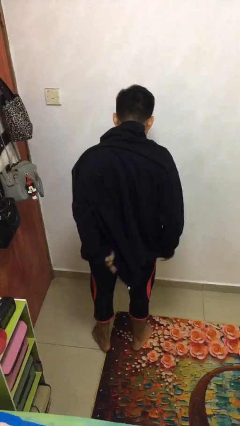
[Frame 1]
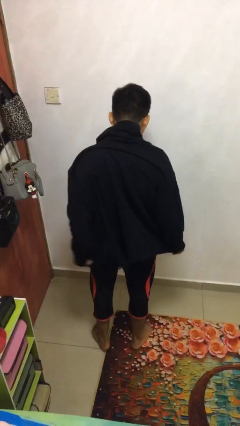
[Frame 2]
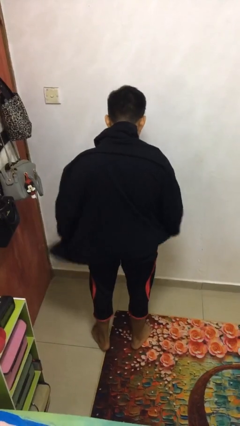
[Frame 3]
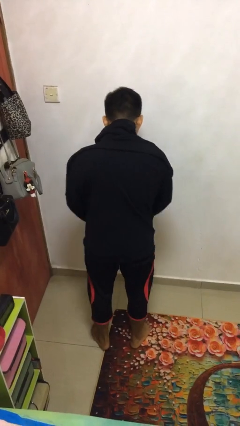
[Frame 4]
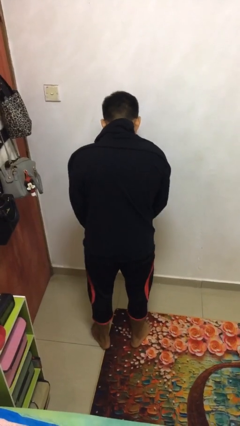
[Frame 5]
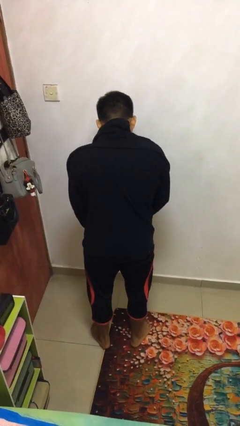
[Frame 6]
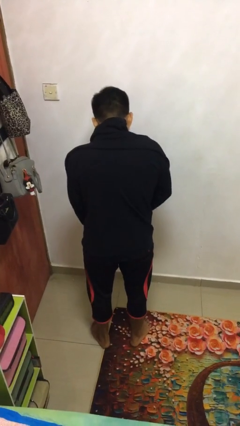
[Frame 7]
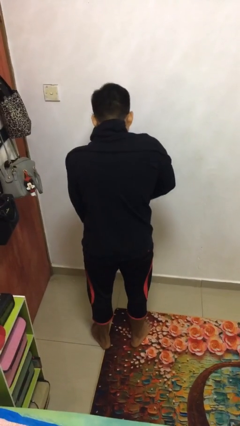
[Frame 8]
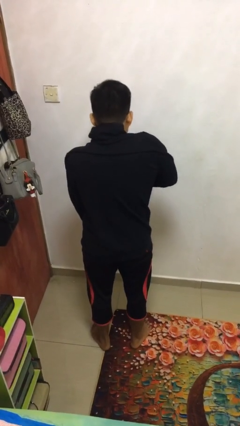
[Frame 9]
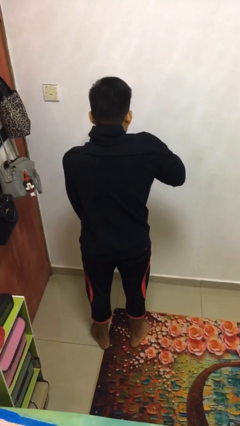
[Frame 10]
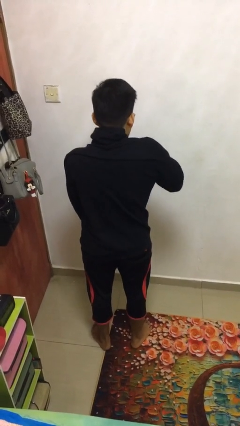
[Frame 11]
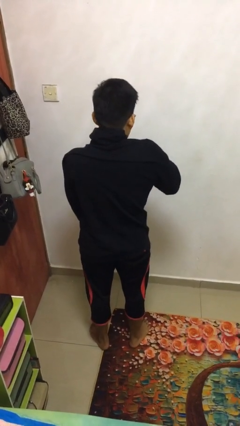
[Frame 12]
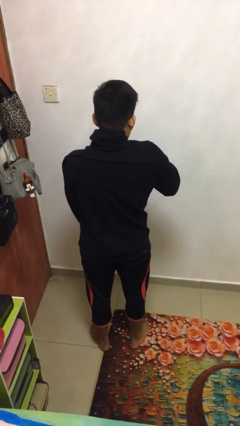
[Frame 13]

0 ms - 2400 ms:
person zips up jacket

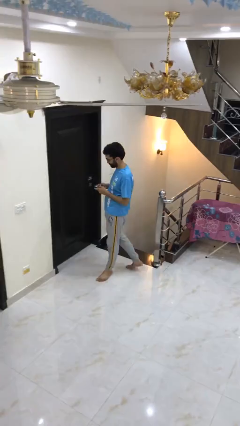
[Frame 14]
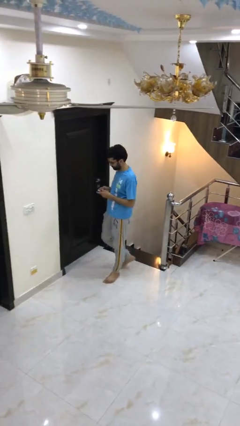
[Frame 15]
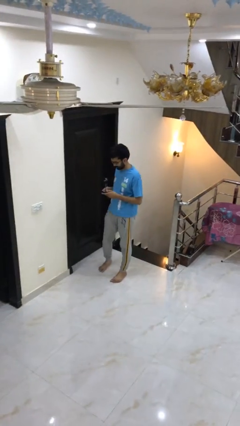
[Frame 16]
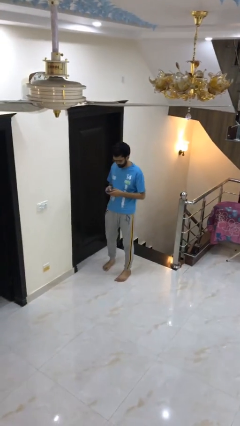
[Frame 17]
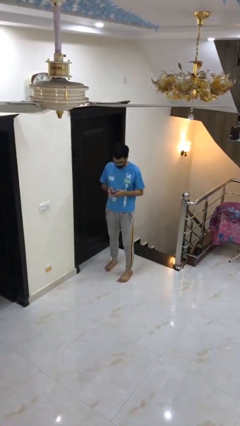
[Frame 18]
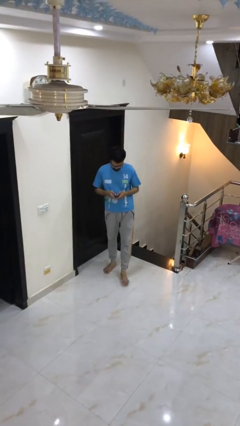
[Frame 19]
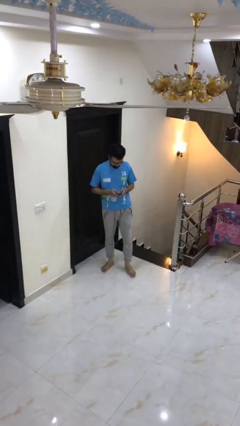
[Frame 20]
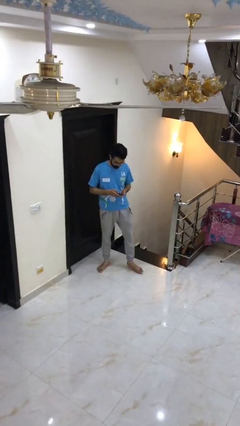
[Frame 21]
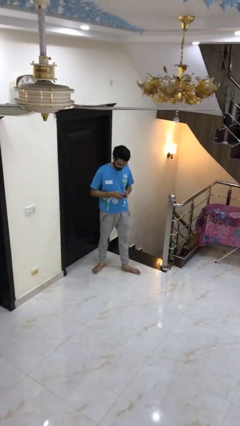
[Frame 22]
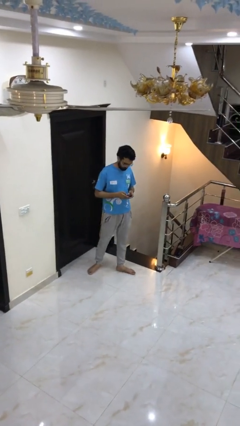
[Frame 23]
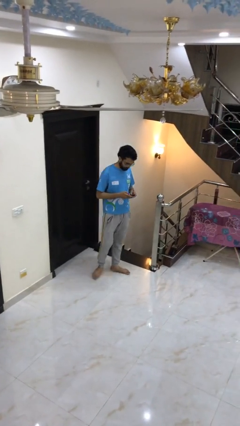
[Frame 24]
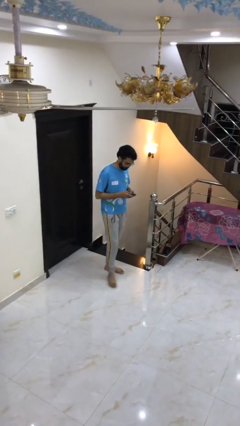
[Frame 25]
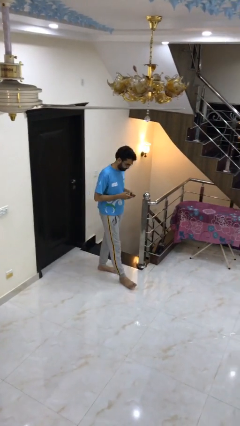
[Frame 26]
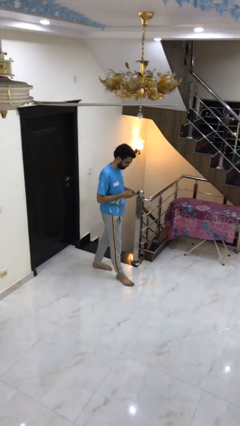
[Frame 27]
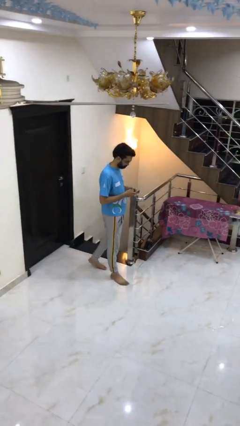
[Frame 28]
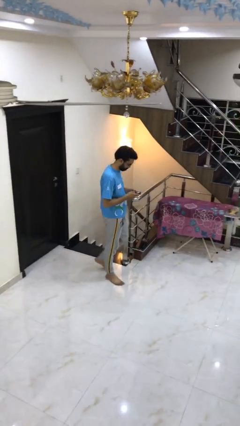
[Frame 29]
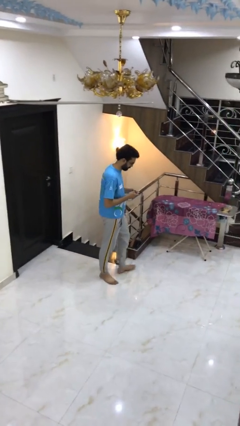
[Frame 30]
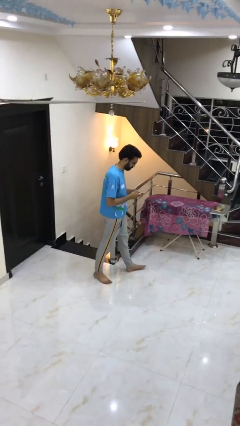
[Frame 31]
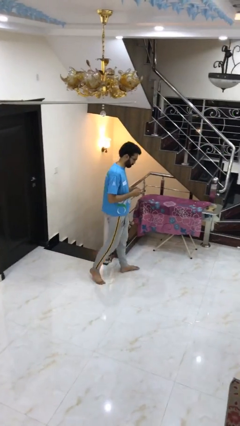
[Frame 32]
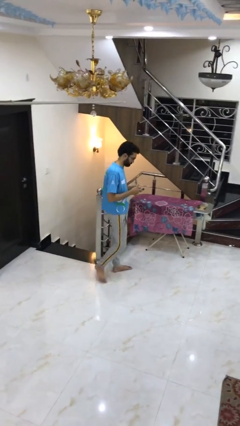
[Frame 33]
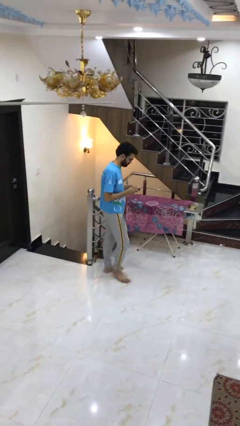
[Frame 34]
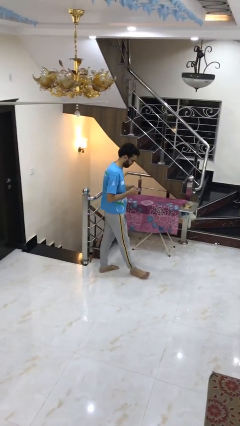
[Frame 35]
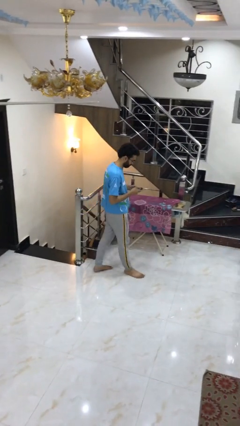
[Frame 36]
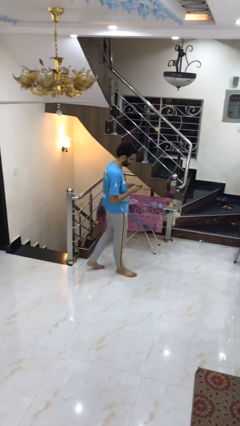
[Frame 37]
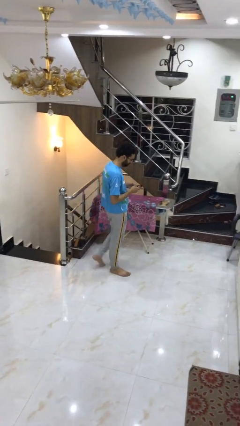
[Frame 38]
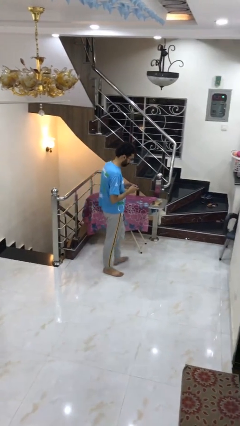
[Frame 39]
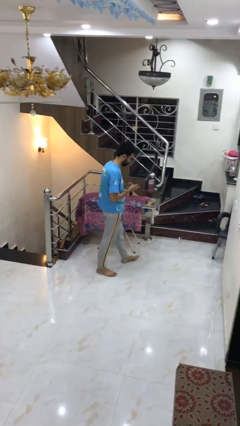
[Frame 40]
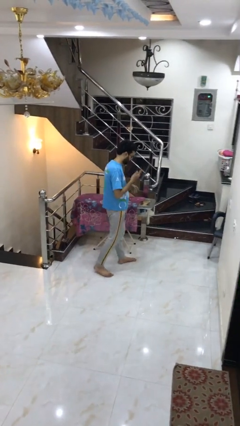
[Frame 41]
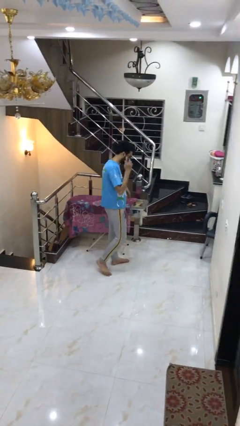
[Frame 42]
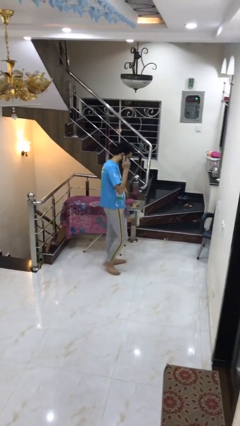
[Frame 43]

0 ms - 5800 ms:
person texts on phone

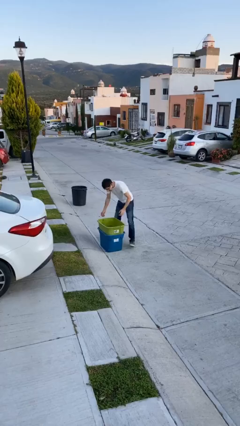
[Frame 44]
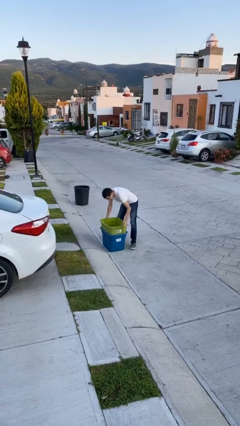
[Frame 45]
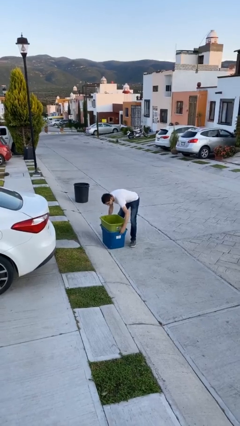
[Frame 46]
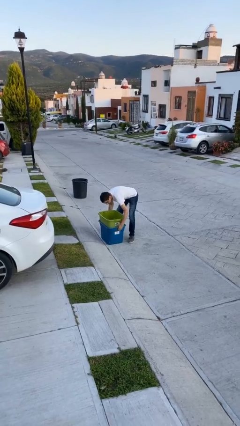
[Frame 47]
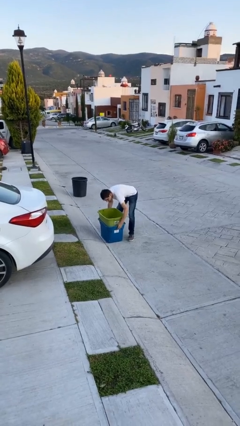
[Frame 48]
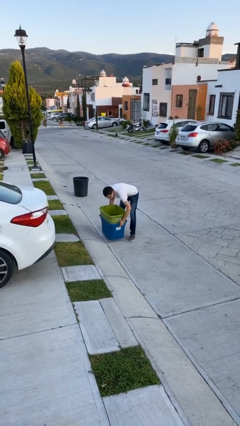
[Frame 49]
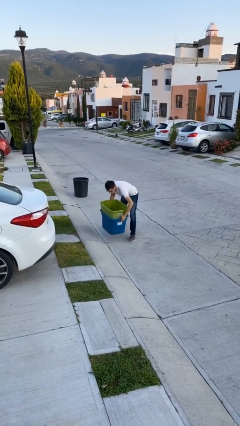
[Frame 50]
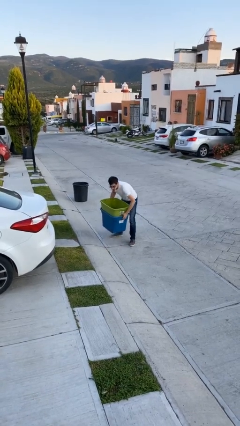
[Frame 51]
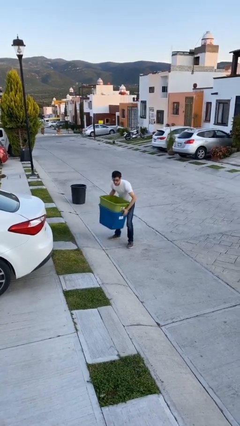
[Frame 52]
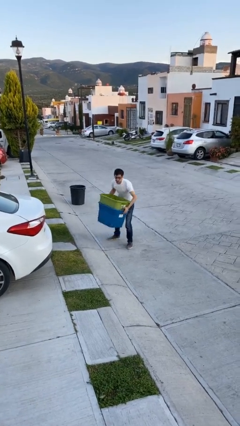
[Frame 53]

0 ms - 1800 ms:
person picks up object from floor

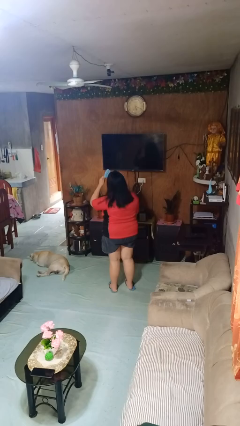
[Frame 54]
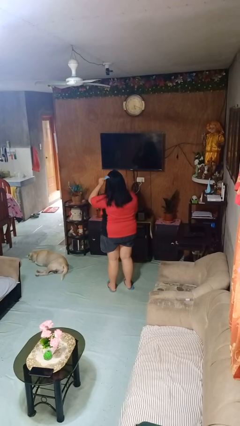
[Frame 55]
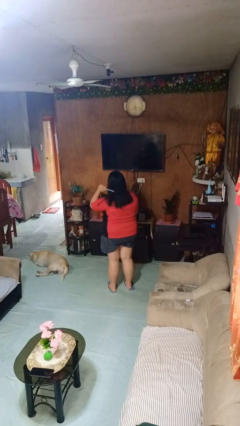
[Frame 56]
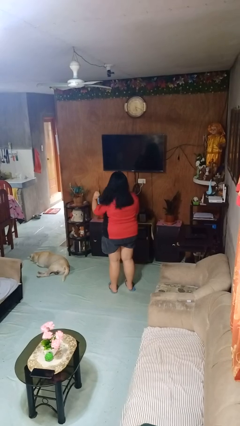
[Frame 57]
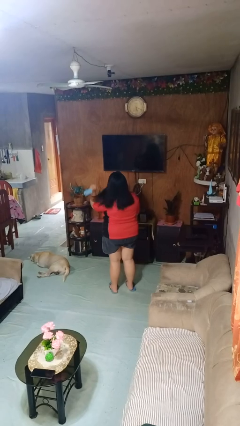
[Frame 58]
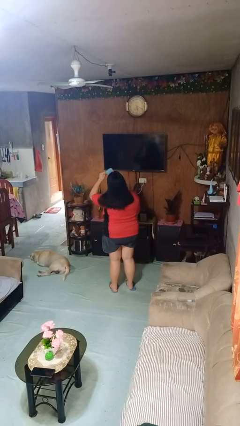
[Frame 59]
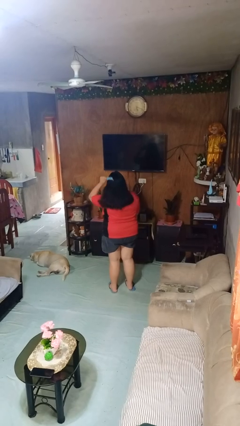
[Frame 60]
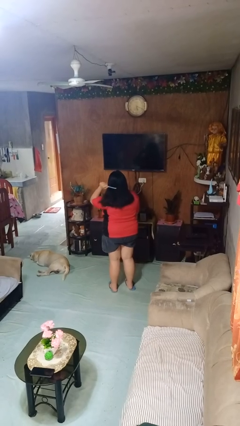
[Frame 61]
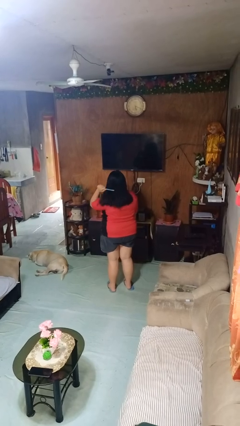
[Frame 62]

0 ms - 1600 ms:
person brushes hair

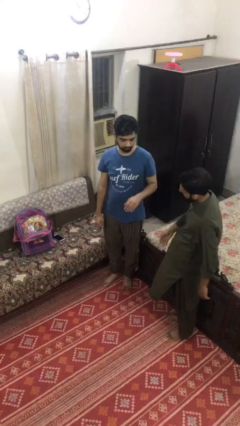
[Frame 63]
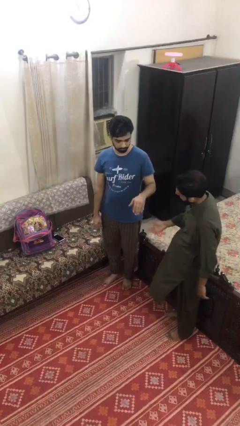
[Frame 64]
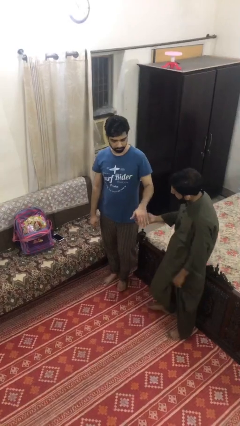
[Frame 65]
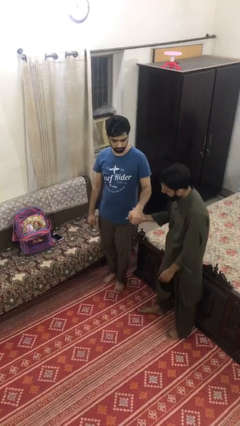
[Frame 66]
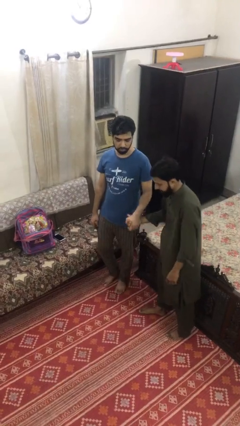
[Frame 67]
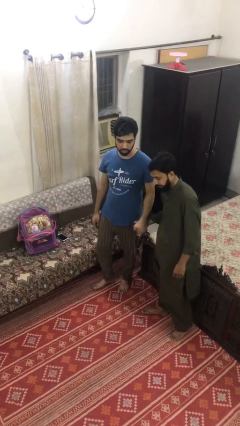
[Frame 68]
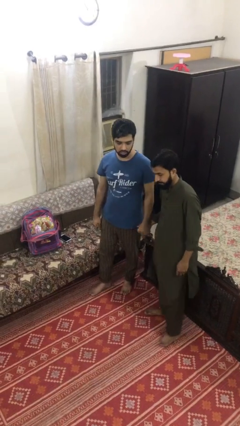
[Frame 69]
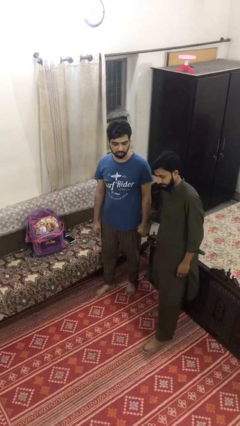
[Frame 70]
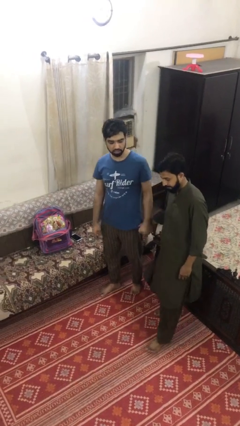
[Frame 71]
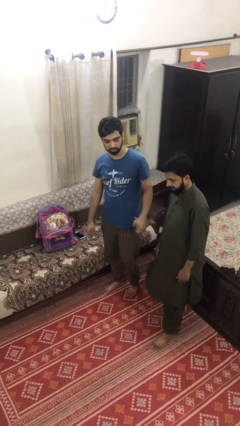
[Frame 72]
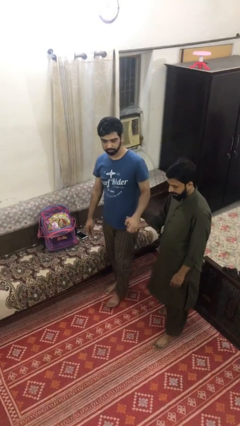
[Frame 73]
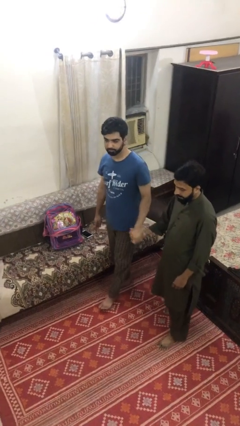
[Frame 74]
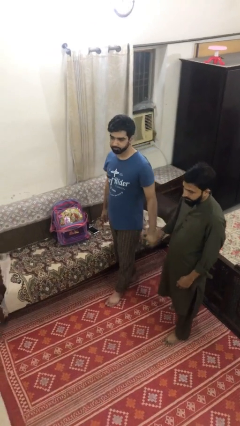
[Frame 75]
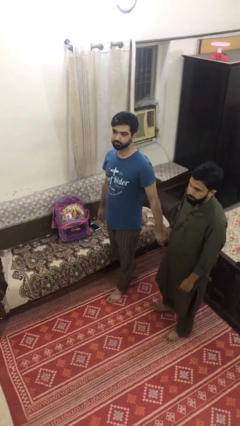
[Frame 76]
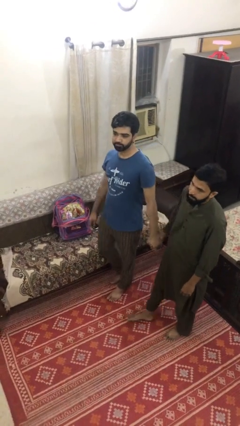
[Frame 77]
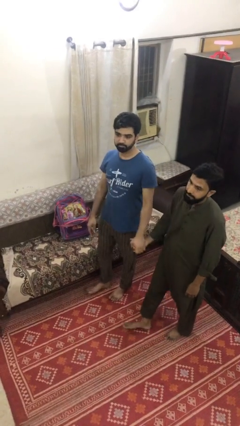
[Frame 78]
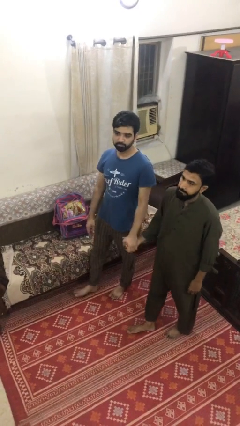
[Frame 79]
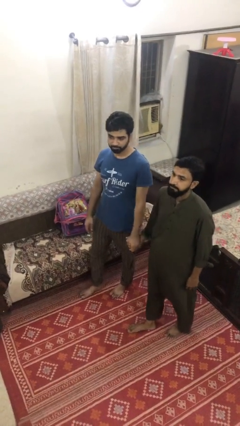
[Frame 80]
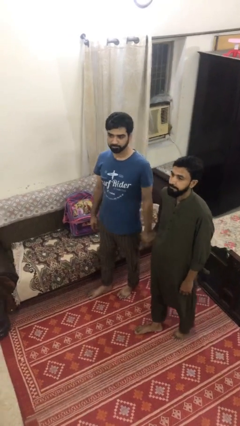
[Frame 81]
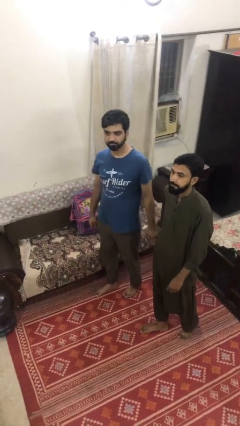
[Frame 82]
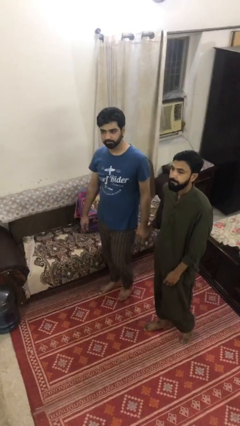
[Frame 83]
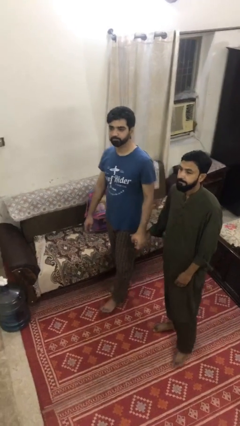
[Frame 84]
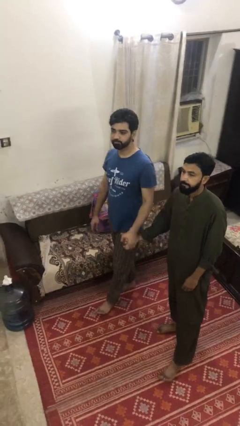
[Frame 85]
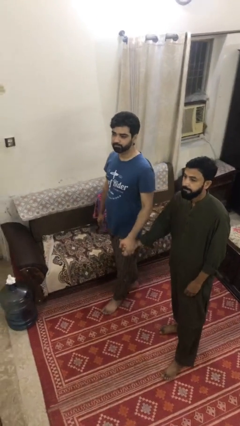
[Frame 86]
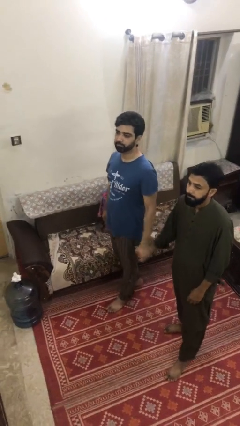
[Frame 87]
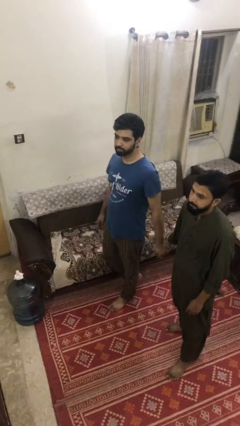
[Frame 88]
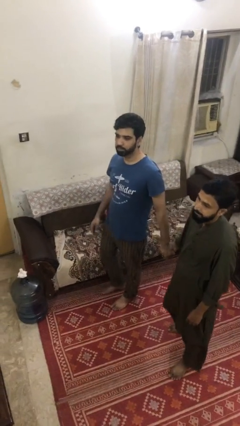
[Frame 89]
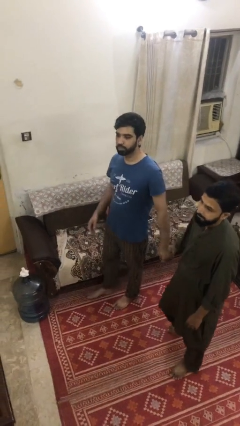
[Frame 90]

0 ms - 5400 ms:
person holds hand

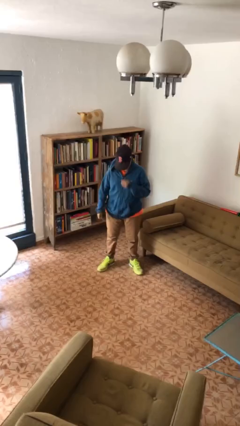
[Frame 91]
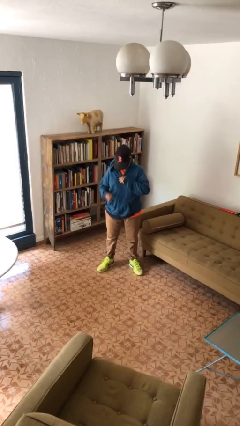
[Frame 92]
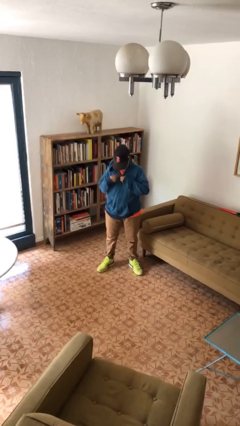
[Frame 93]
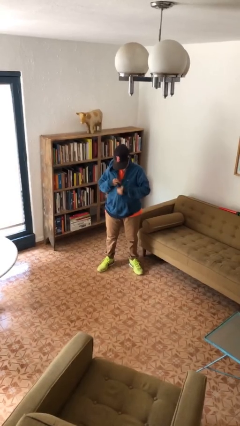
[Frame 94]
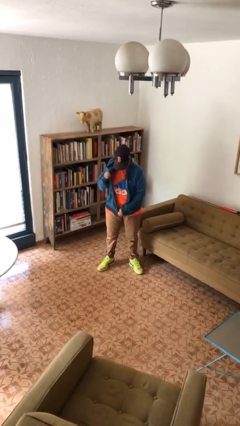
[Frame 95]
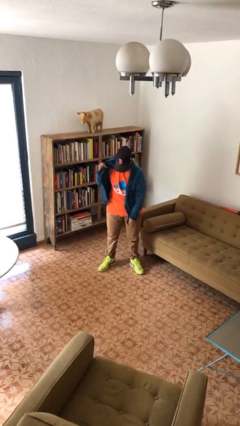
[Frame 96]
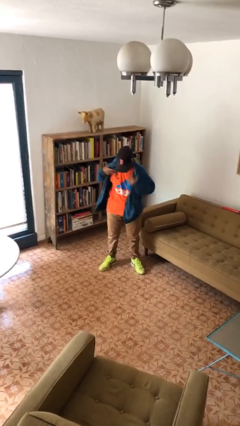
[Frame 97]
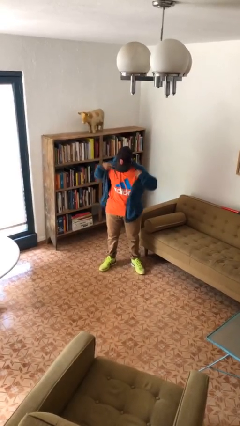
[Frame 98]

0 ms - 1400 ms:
person unzips jacket
